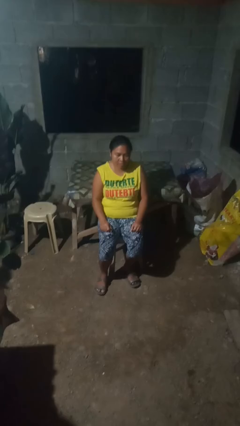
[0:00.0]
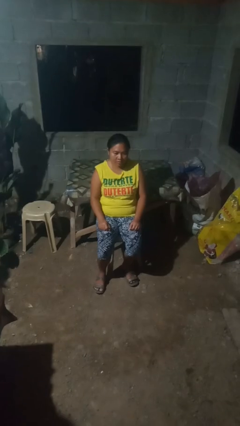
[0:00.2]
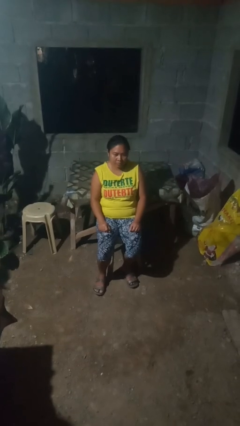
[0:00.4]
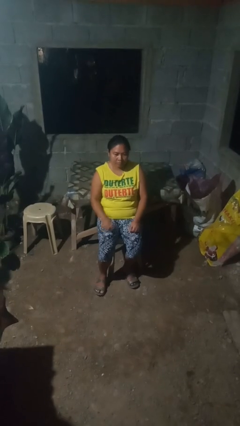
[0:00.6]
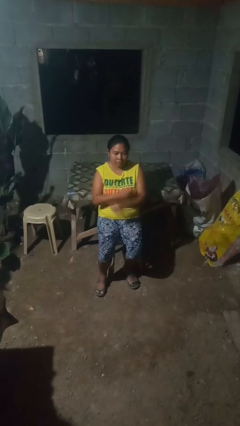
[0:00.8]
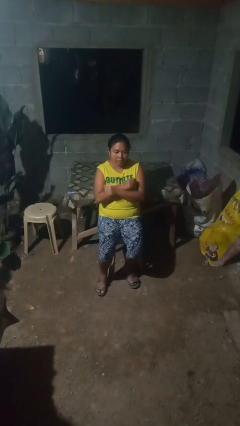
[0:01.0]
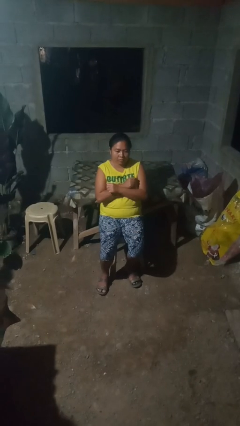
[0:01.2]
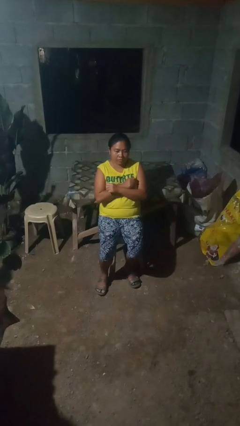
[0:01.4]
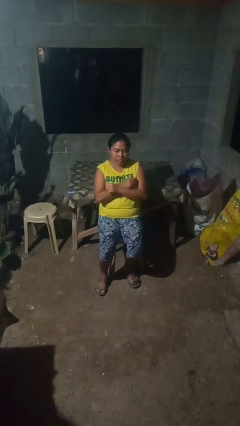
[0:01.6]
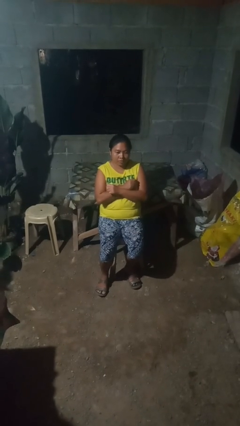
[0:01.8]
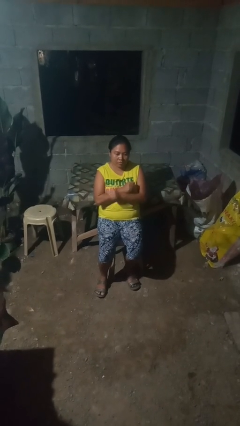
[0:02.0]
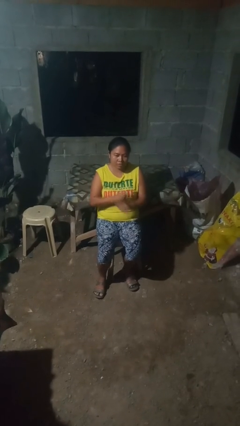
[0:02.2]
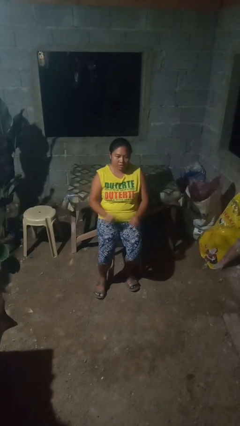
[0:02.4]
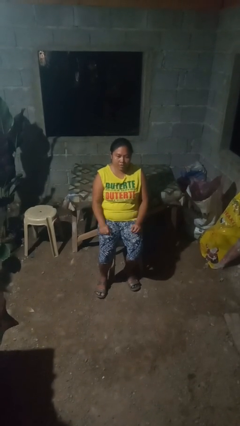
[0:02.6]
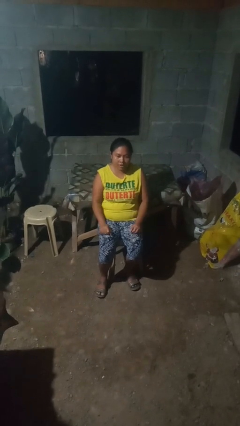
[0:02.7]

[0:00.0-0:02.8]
person crosses arms

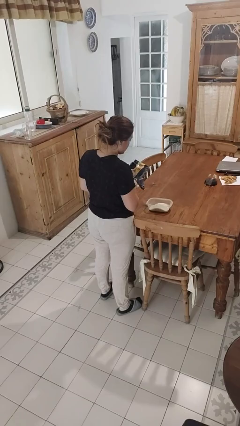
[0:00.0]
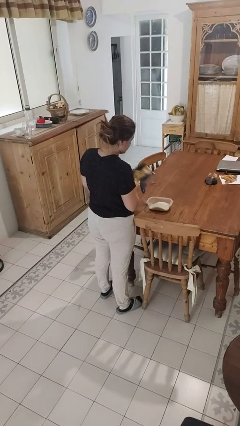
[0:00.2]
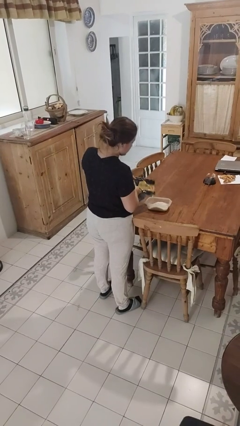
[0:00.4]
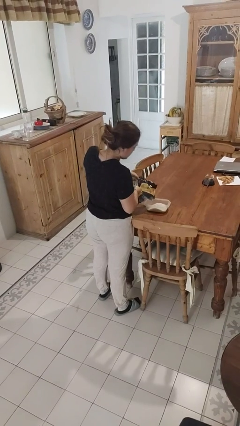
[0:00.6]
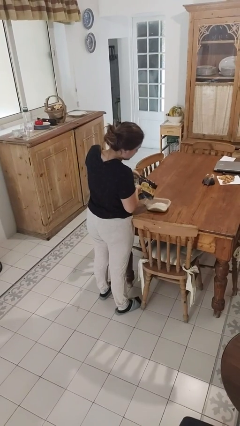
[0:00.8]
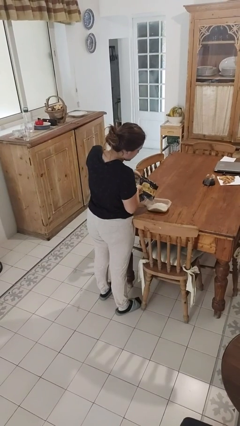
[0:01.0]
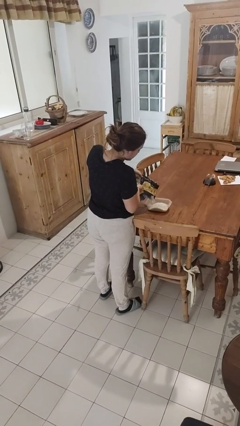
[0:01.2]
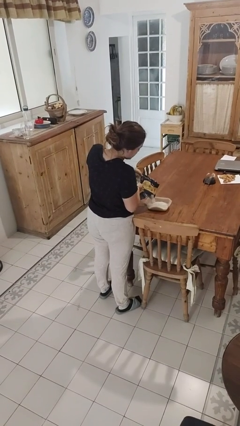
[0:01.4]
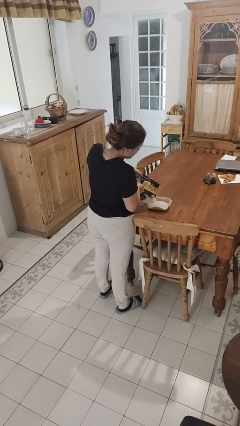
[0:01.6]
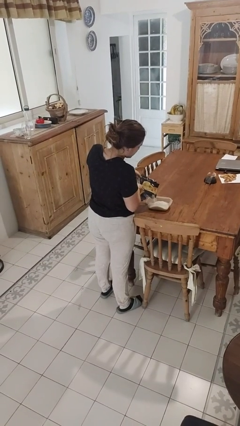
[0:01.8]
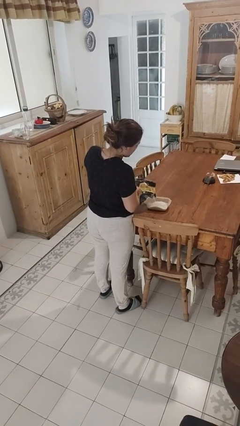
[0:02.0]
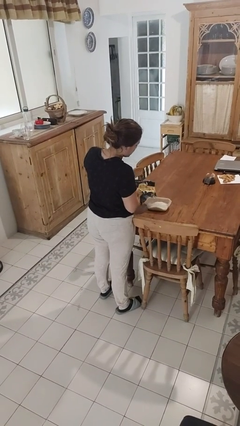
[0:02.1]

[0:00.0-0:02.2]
person pours into bowl

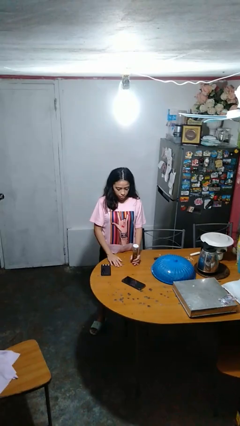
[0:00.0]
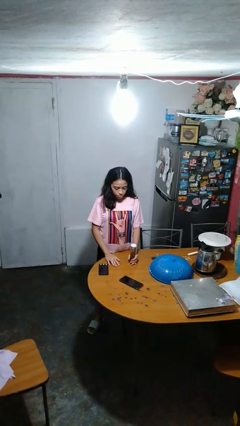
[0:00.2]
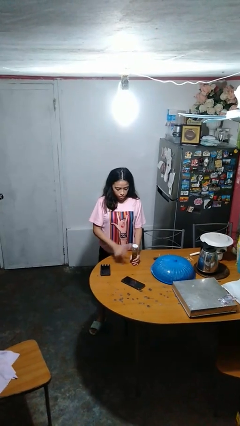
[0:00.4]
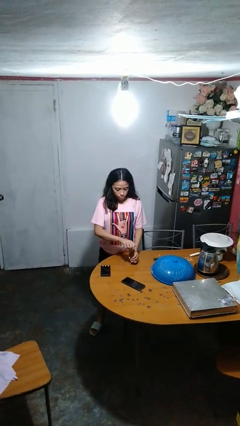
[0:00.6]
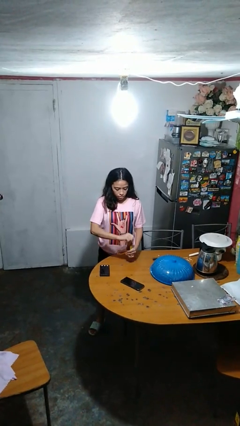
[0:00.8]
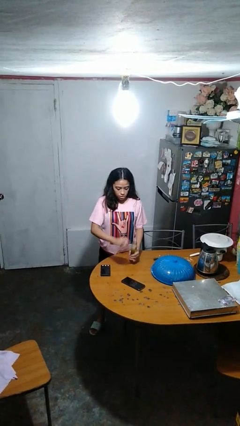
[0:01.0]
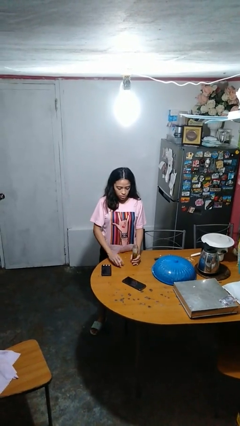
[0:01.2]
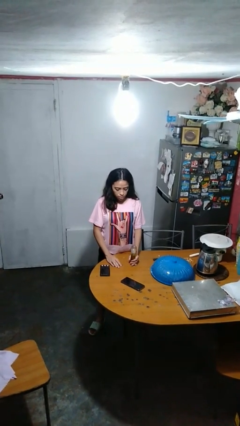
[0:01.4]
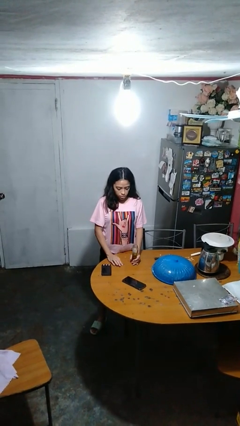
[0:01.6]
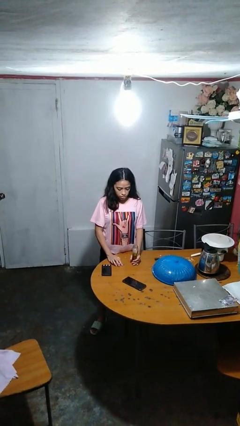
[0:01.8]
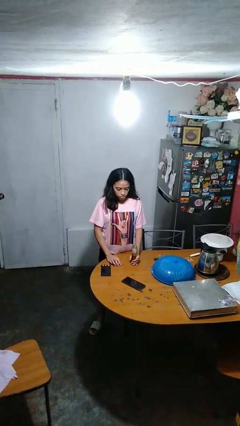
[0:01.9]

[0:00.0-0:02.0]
person opens jar

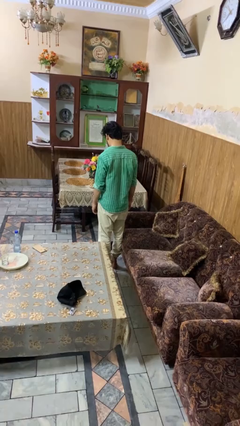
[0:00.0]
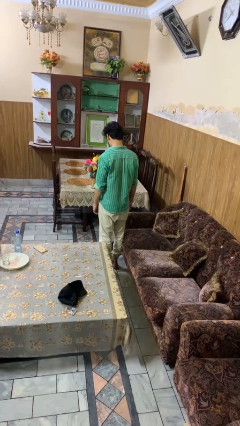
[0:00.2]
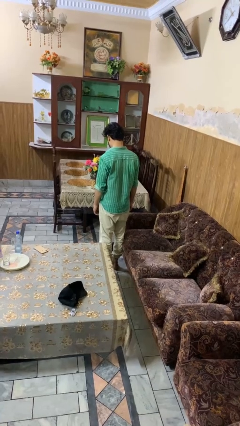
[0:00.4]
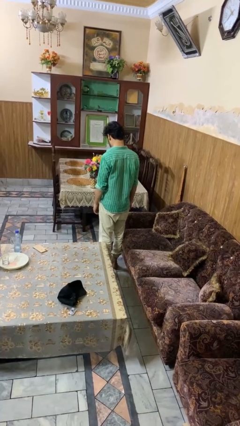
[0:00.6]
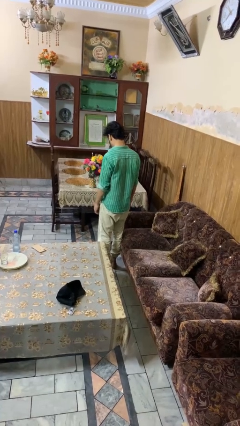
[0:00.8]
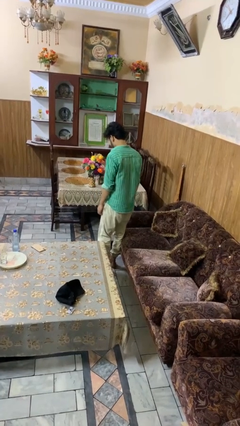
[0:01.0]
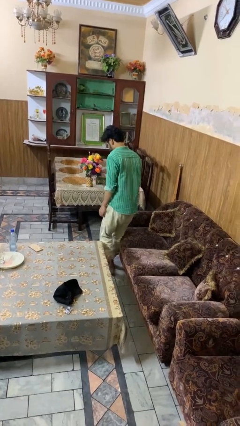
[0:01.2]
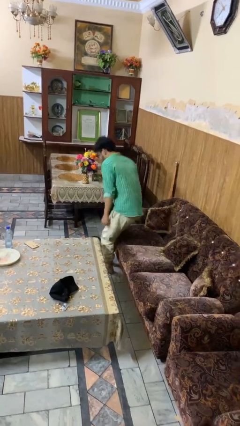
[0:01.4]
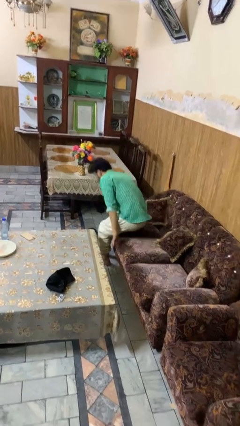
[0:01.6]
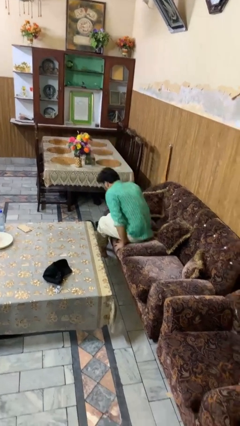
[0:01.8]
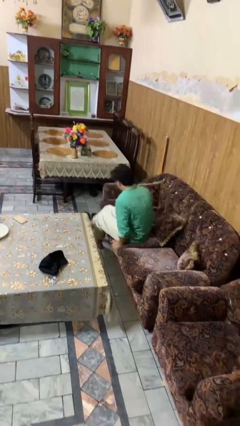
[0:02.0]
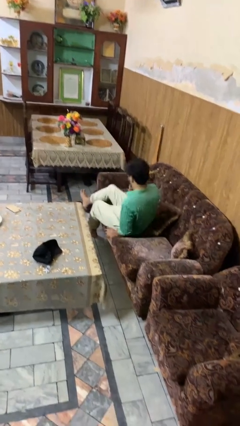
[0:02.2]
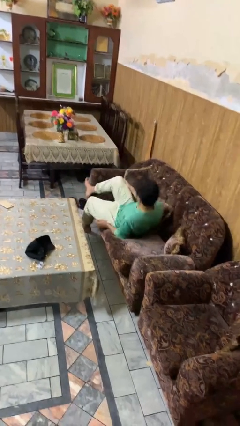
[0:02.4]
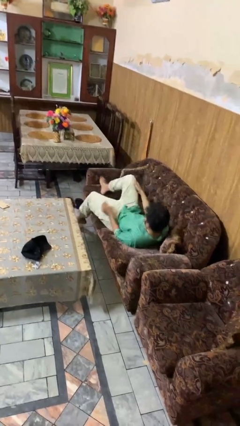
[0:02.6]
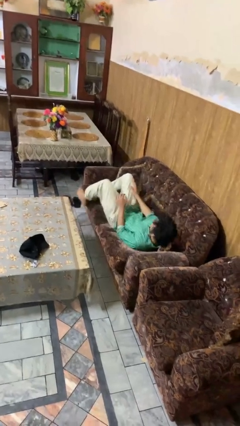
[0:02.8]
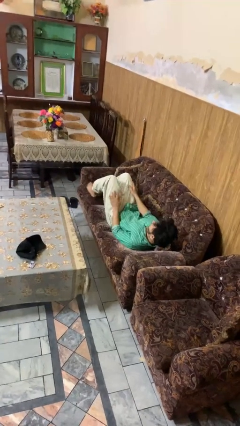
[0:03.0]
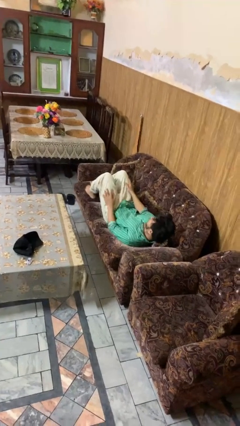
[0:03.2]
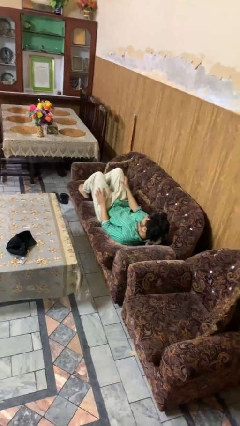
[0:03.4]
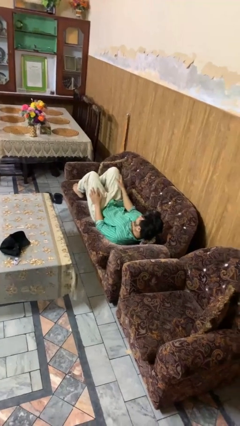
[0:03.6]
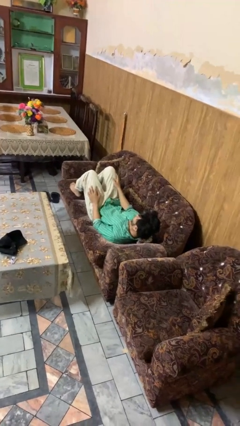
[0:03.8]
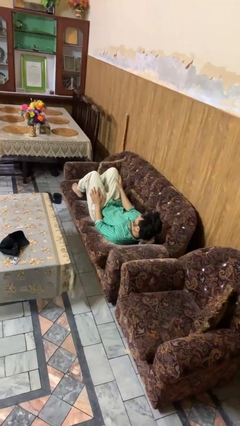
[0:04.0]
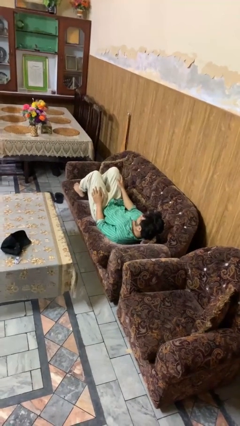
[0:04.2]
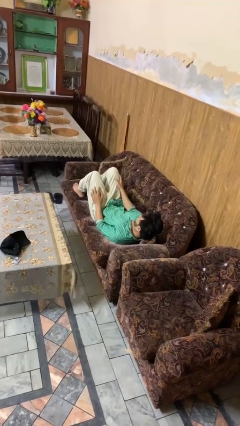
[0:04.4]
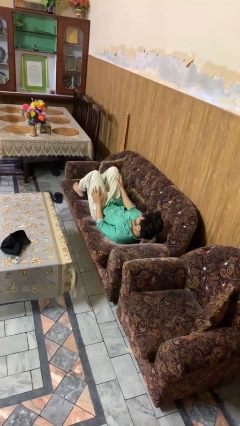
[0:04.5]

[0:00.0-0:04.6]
person lies down on couch

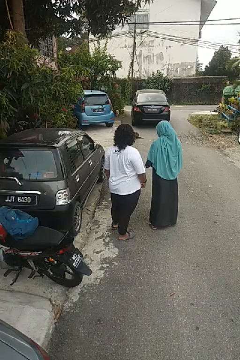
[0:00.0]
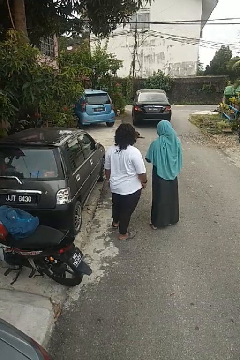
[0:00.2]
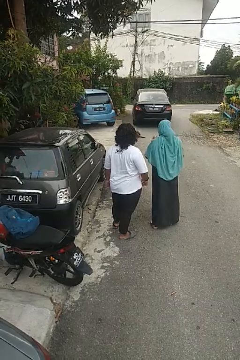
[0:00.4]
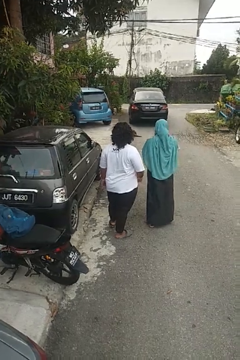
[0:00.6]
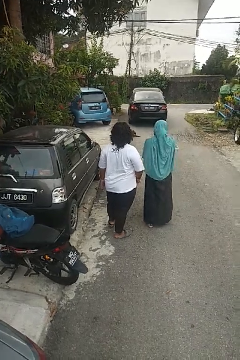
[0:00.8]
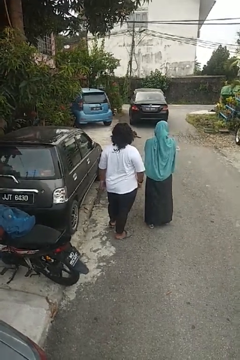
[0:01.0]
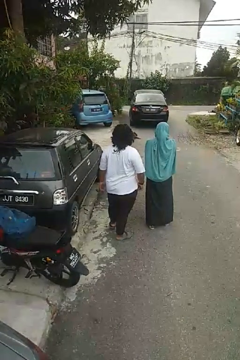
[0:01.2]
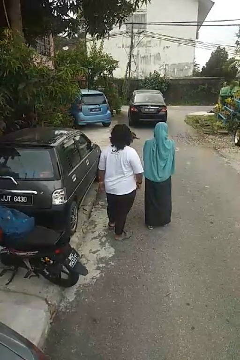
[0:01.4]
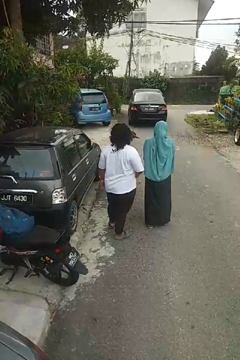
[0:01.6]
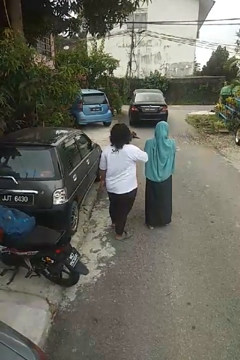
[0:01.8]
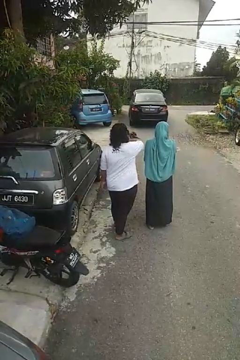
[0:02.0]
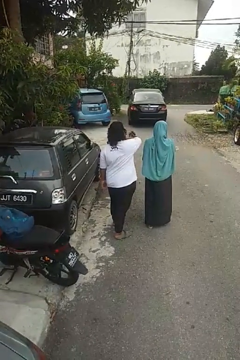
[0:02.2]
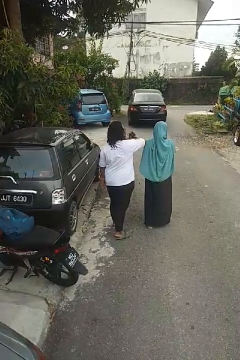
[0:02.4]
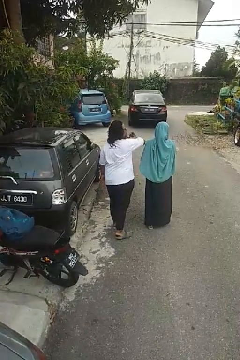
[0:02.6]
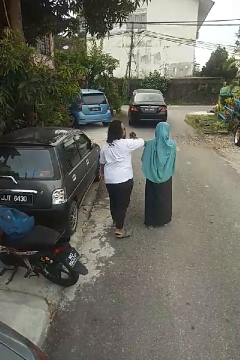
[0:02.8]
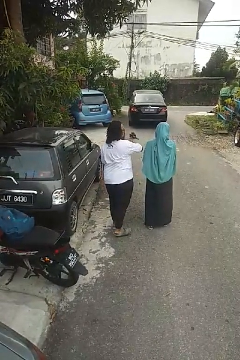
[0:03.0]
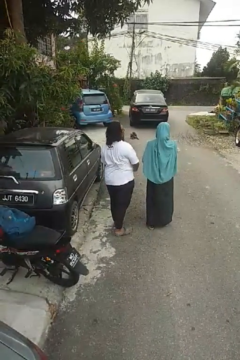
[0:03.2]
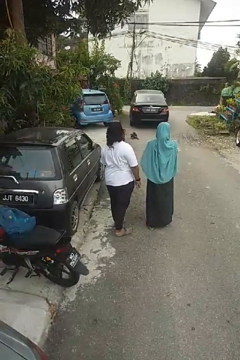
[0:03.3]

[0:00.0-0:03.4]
person nudges person with elbow

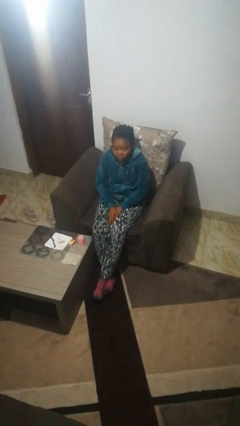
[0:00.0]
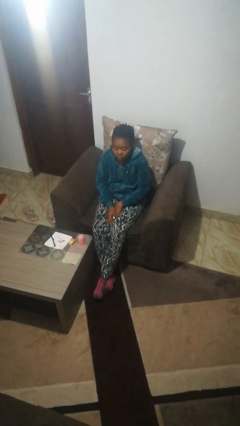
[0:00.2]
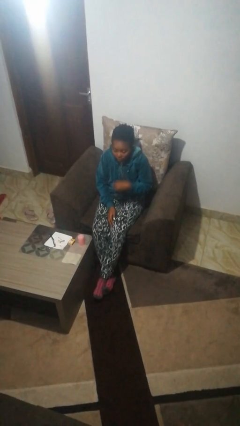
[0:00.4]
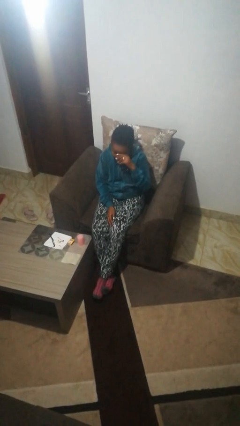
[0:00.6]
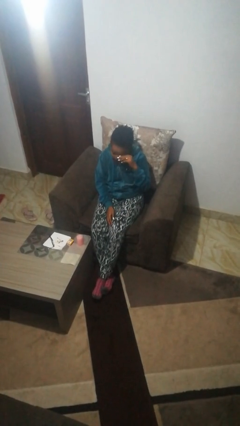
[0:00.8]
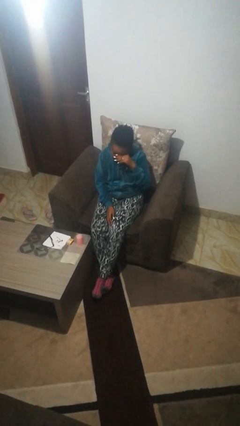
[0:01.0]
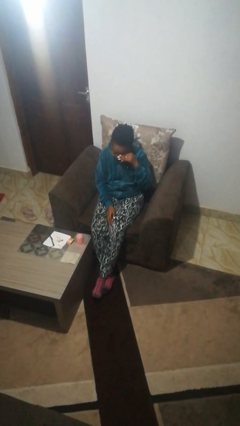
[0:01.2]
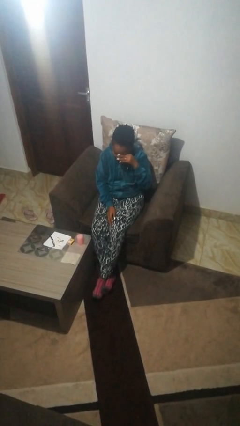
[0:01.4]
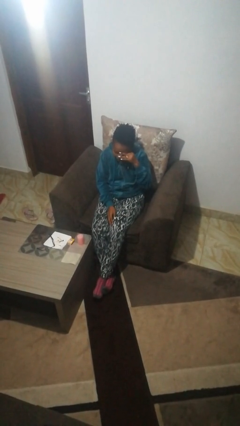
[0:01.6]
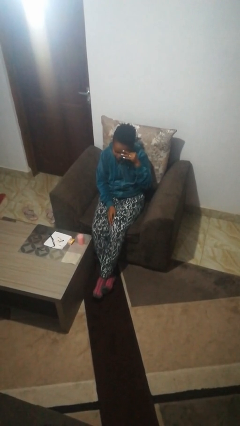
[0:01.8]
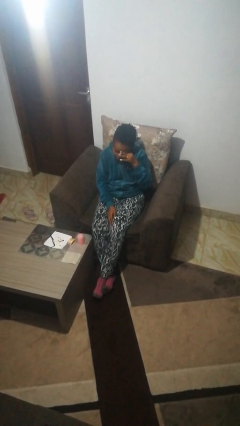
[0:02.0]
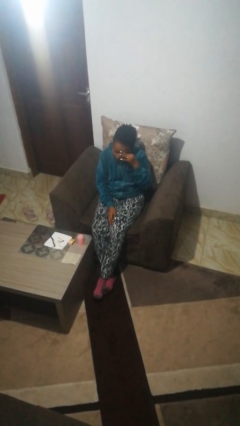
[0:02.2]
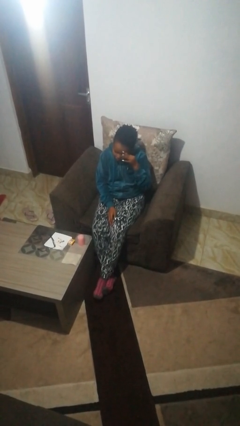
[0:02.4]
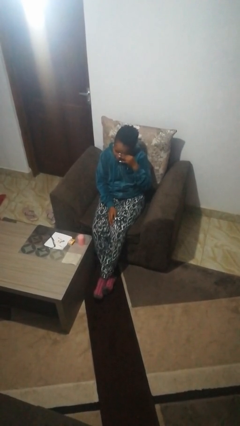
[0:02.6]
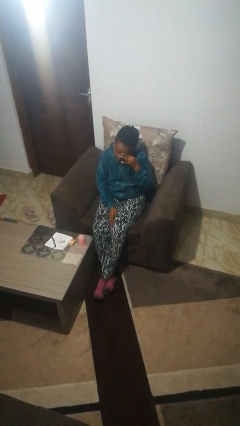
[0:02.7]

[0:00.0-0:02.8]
person rubs eyes

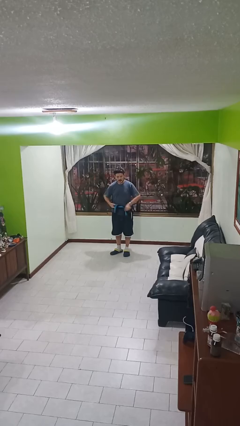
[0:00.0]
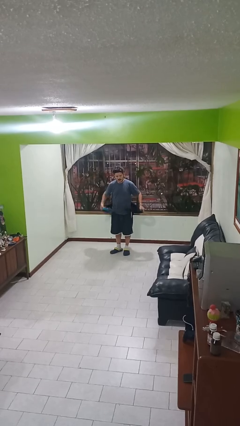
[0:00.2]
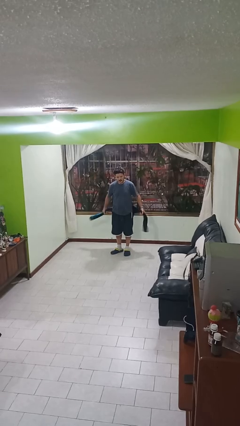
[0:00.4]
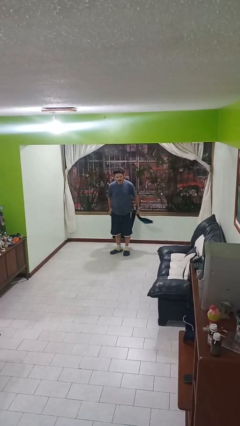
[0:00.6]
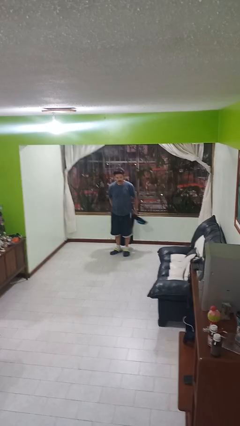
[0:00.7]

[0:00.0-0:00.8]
person unties jacket around waist
